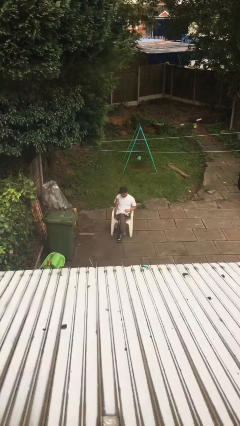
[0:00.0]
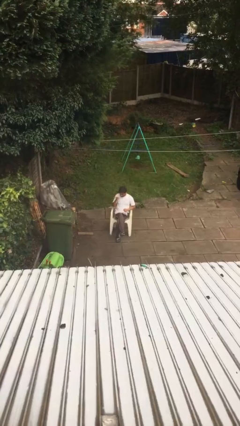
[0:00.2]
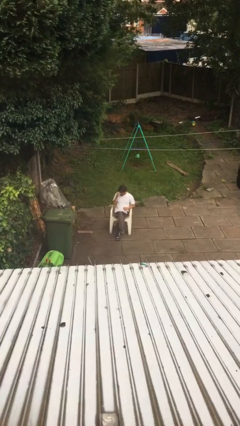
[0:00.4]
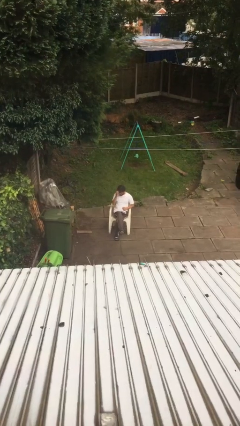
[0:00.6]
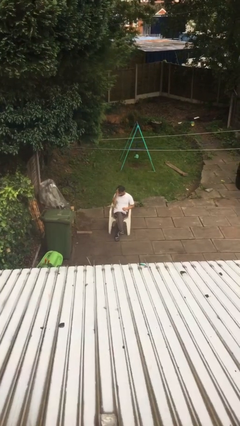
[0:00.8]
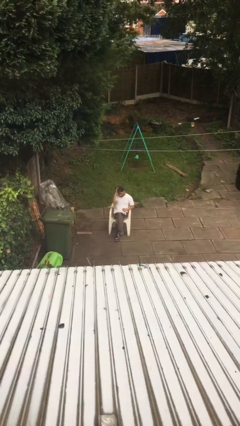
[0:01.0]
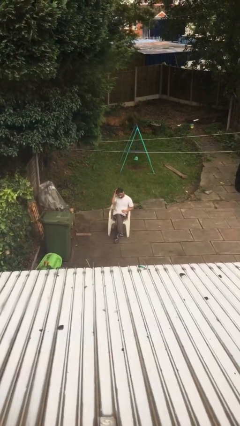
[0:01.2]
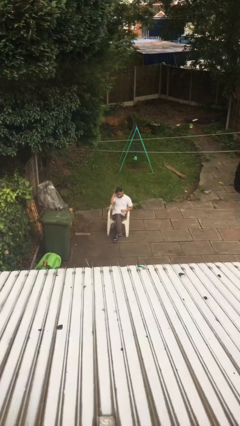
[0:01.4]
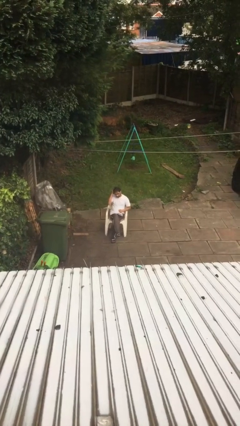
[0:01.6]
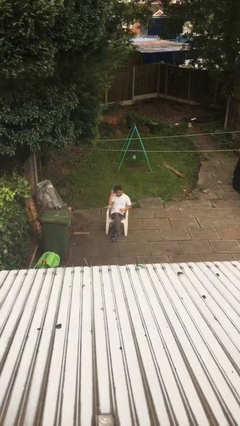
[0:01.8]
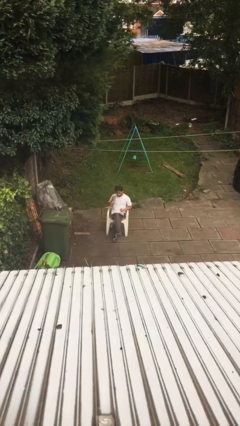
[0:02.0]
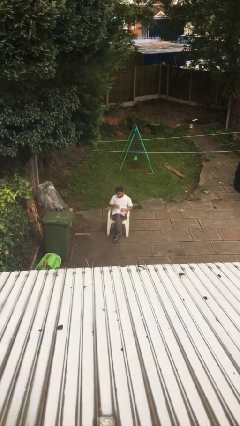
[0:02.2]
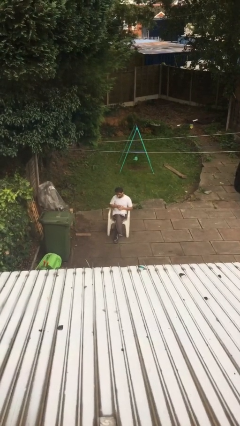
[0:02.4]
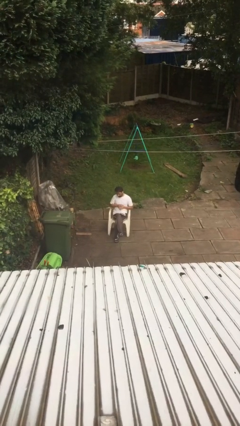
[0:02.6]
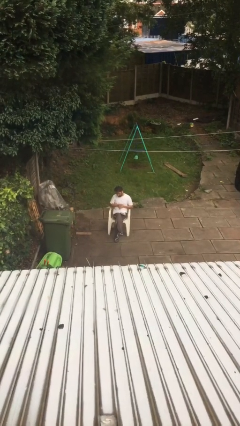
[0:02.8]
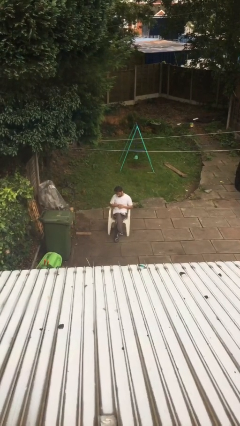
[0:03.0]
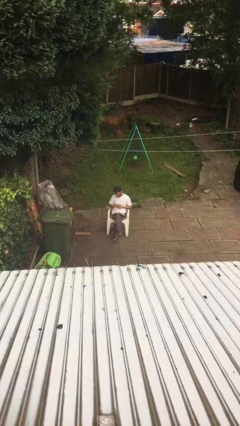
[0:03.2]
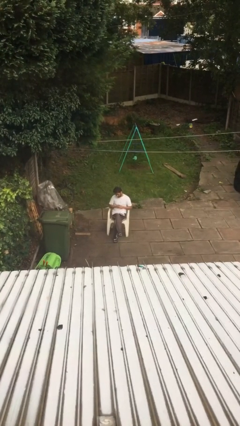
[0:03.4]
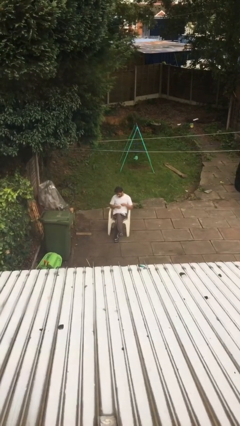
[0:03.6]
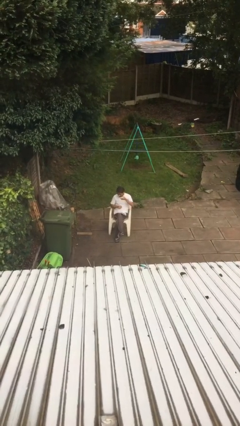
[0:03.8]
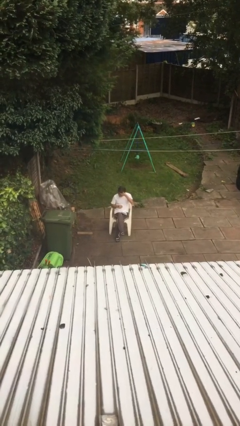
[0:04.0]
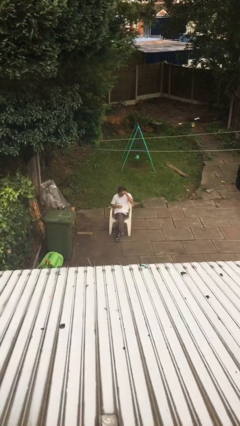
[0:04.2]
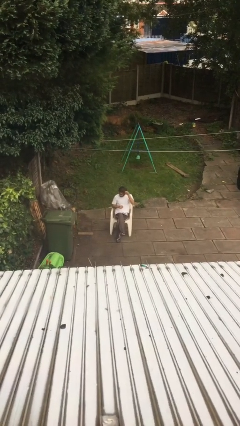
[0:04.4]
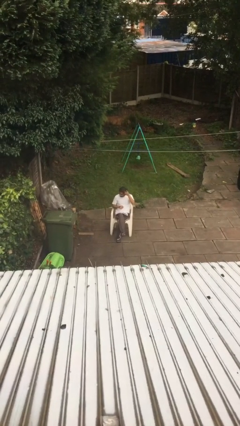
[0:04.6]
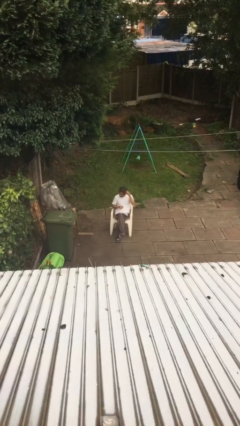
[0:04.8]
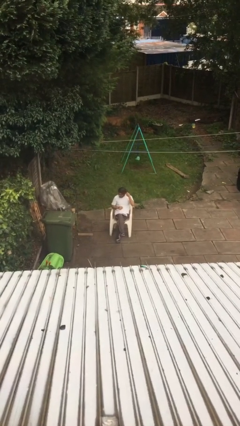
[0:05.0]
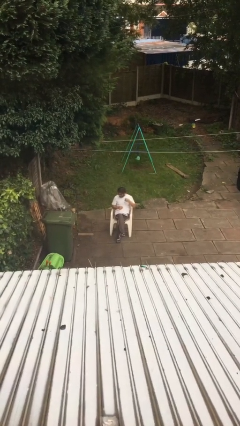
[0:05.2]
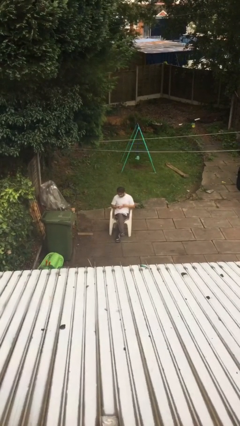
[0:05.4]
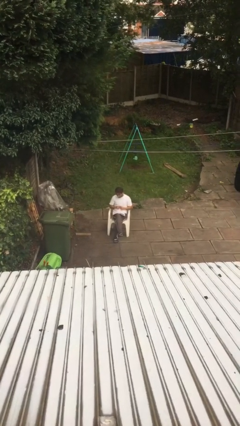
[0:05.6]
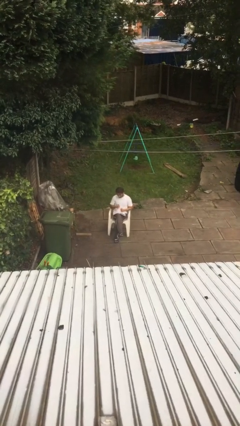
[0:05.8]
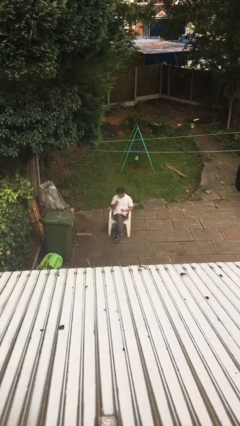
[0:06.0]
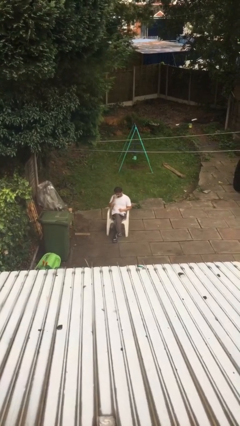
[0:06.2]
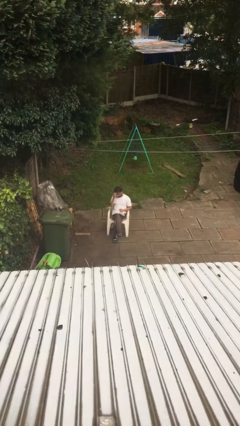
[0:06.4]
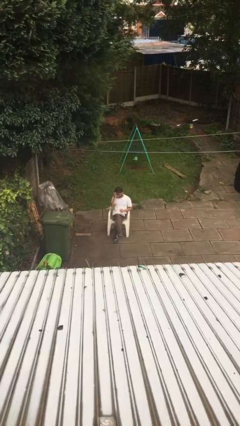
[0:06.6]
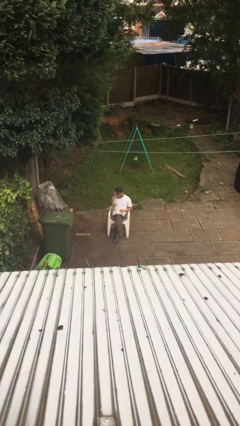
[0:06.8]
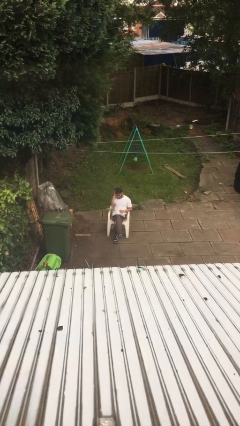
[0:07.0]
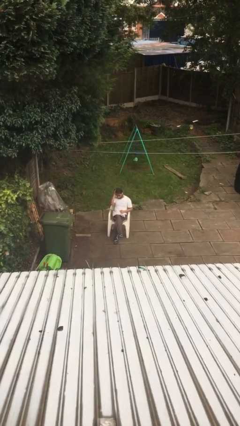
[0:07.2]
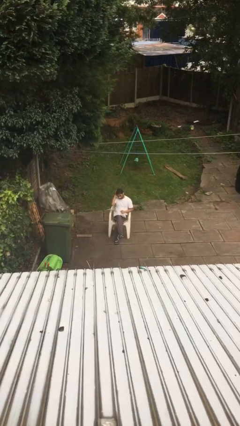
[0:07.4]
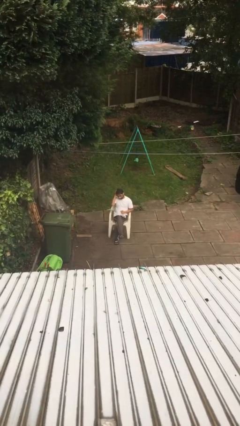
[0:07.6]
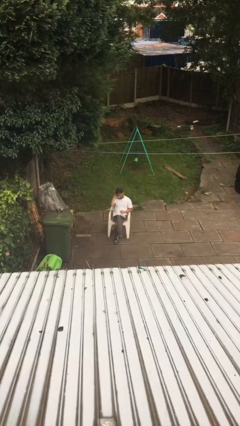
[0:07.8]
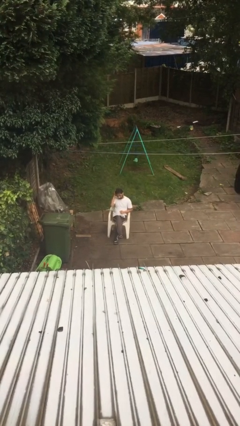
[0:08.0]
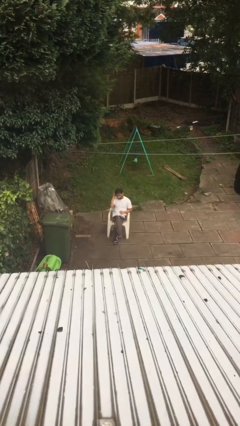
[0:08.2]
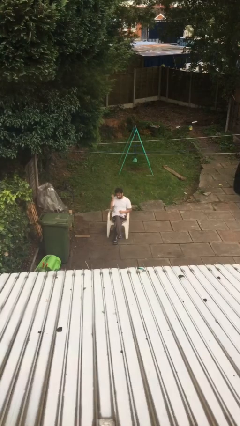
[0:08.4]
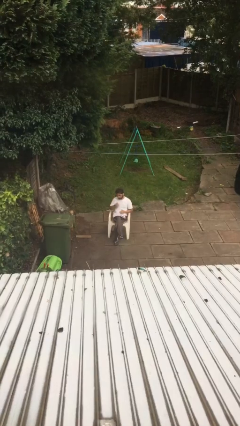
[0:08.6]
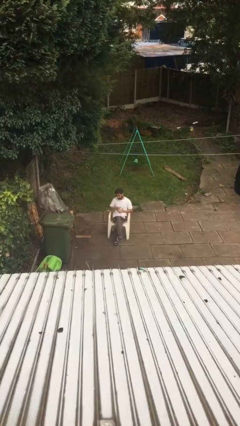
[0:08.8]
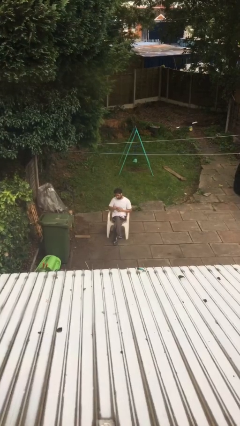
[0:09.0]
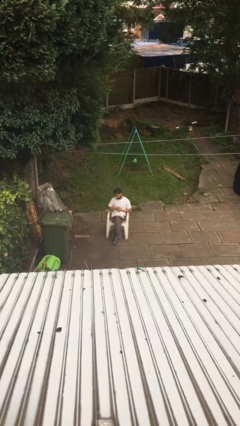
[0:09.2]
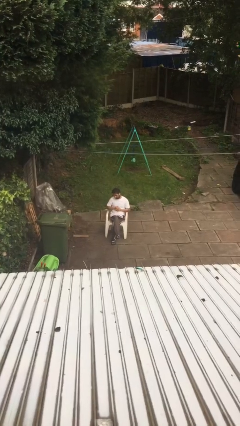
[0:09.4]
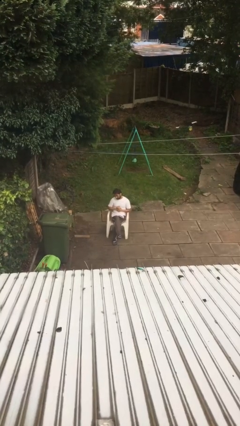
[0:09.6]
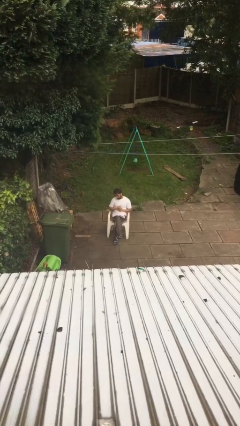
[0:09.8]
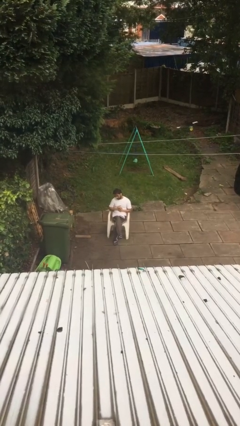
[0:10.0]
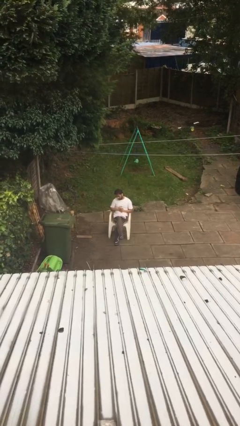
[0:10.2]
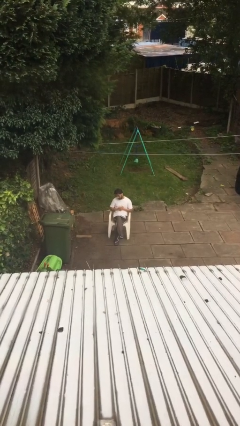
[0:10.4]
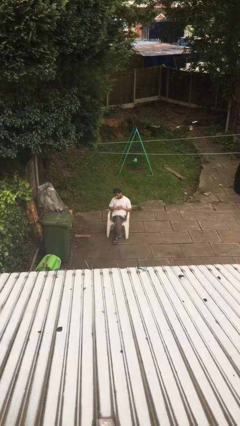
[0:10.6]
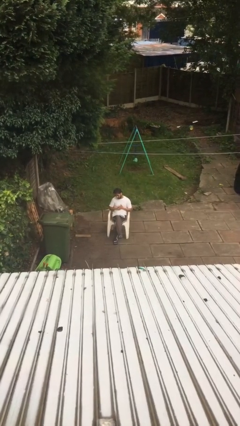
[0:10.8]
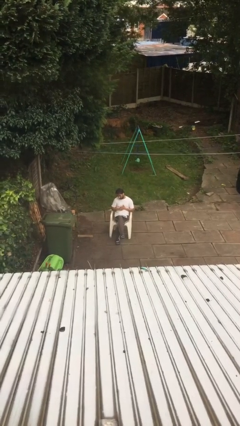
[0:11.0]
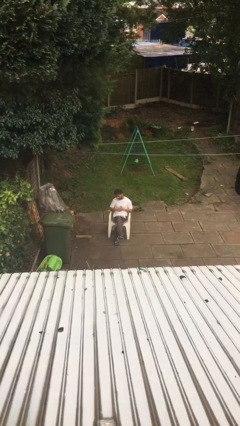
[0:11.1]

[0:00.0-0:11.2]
person reads document

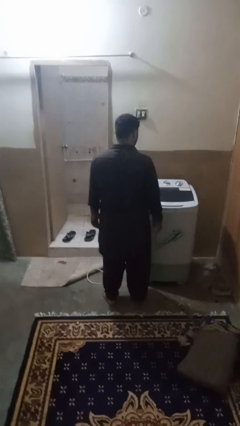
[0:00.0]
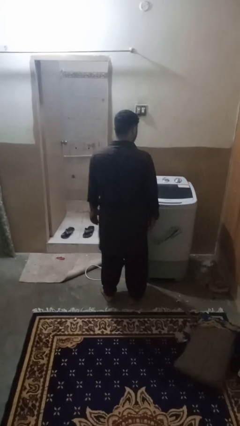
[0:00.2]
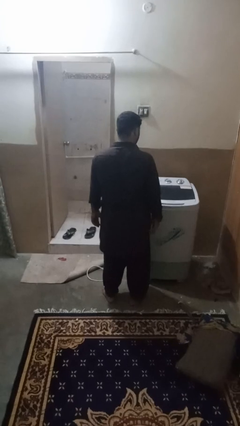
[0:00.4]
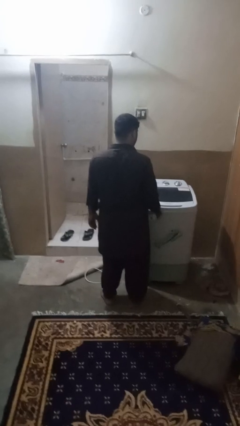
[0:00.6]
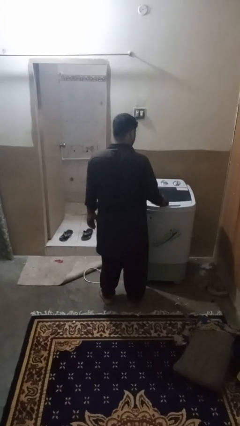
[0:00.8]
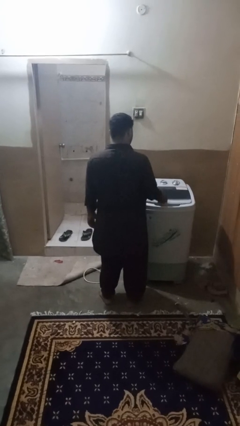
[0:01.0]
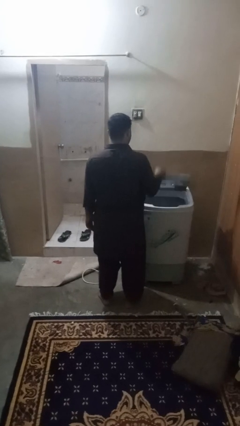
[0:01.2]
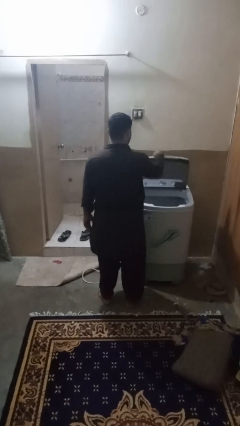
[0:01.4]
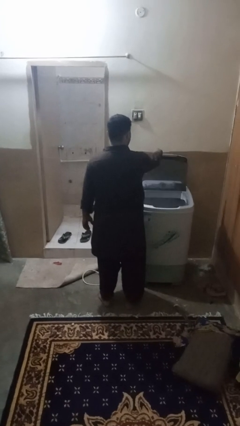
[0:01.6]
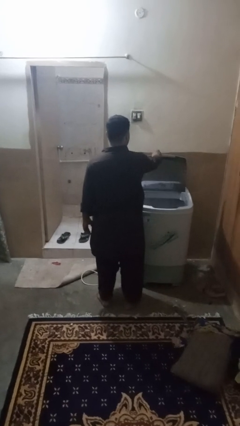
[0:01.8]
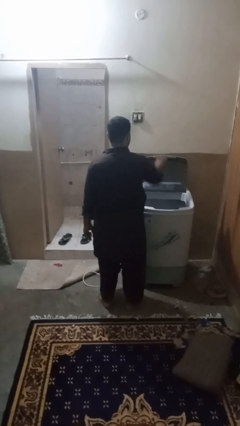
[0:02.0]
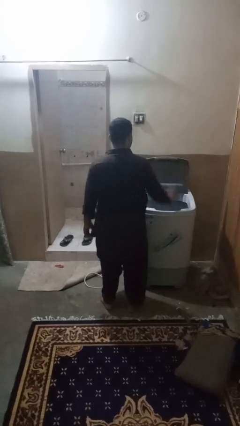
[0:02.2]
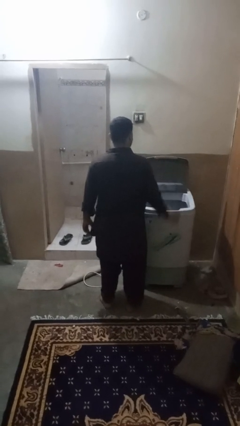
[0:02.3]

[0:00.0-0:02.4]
person opens clothes washer

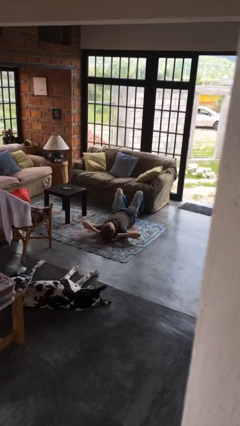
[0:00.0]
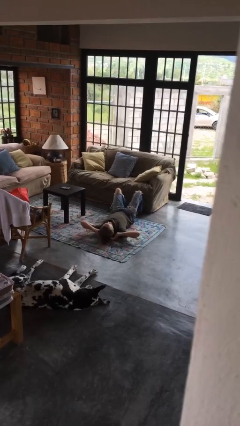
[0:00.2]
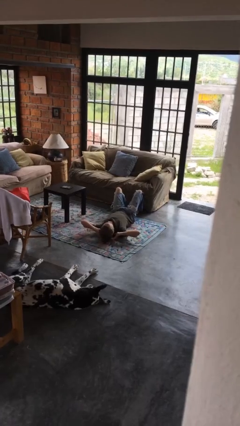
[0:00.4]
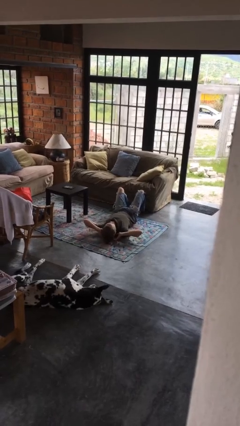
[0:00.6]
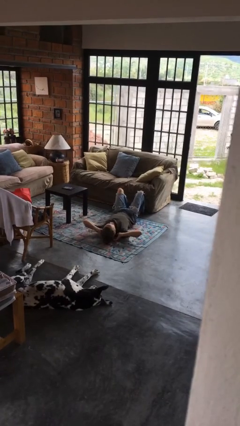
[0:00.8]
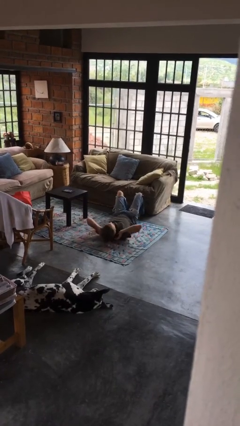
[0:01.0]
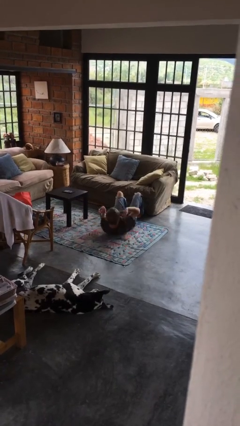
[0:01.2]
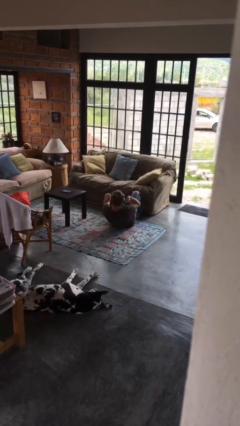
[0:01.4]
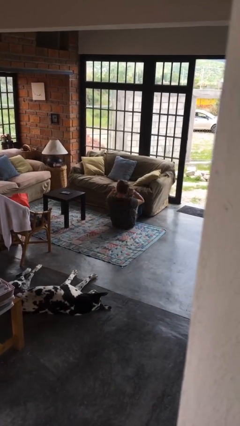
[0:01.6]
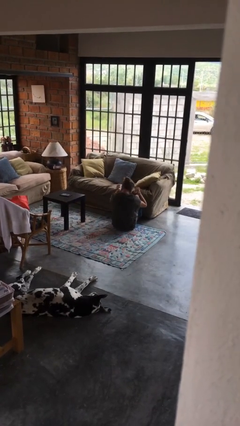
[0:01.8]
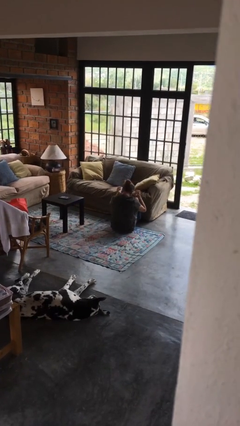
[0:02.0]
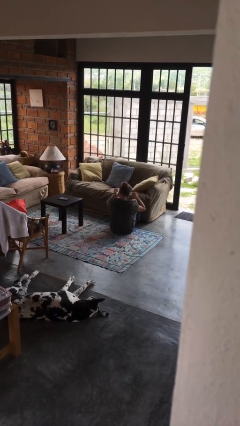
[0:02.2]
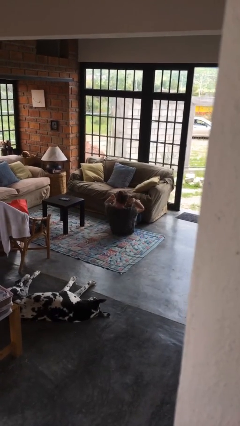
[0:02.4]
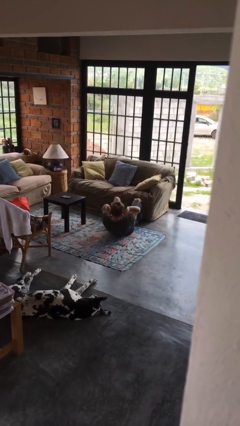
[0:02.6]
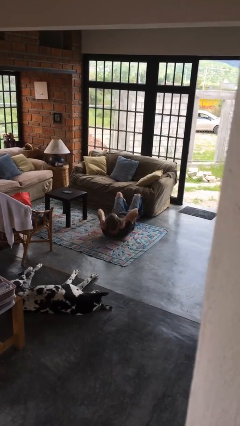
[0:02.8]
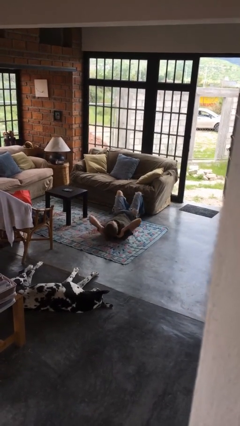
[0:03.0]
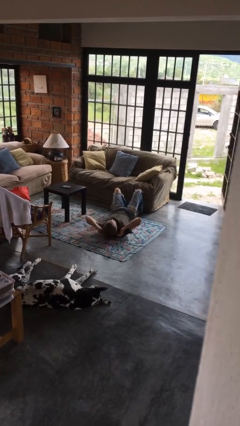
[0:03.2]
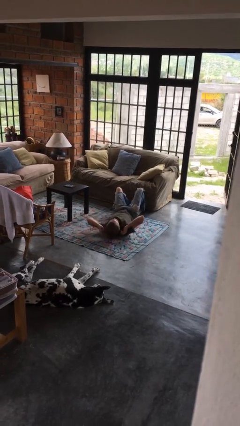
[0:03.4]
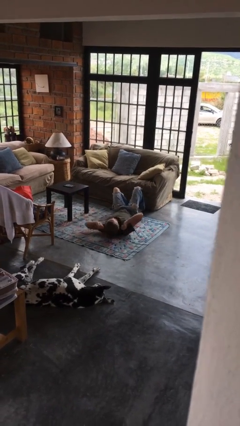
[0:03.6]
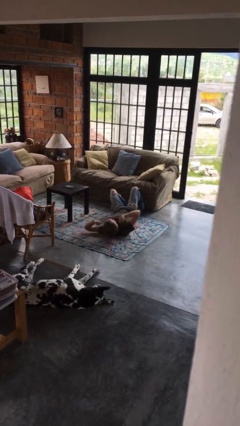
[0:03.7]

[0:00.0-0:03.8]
person exercises with situp

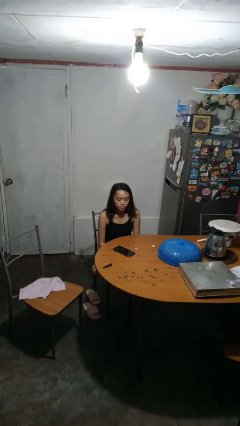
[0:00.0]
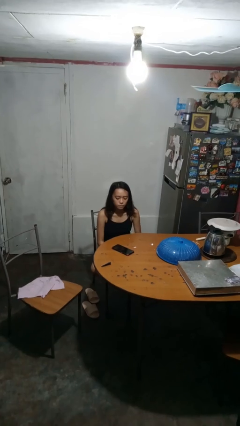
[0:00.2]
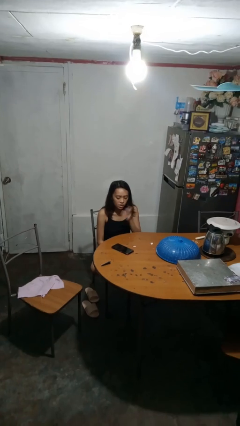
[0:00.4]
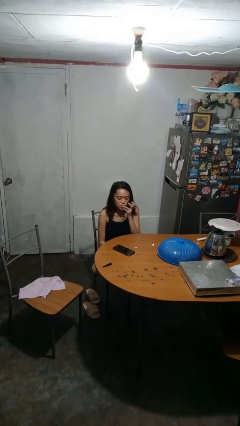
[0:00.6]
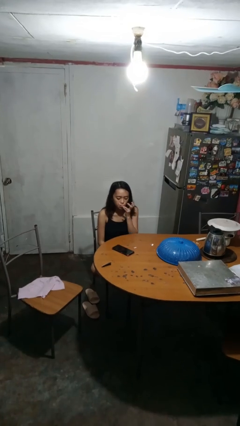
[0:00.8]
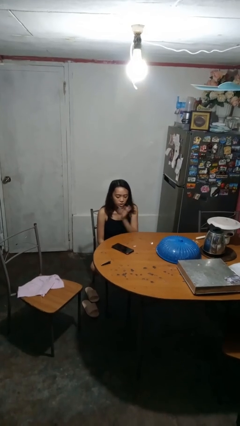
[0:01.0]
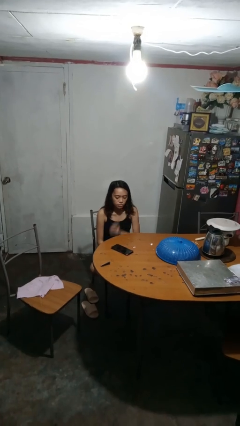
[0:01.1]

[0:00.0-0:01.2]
person licks fingers
